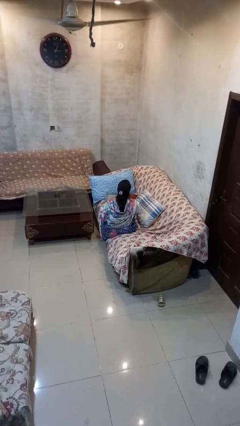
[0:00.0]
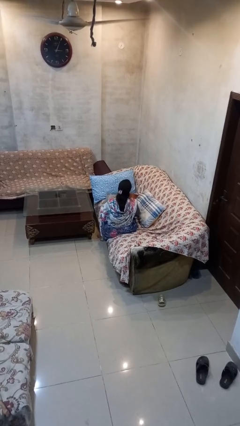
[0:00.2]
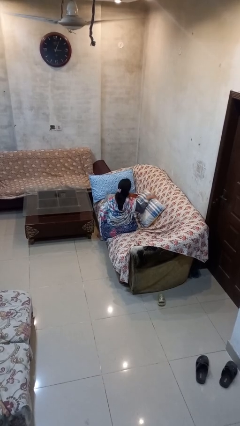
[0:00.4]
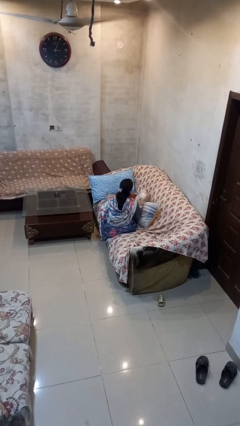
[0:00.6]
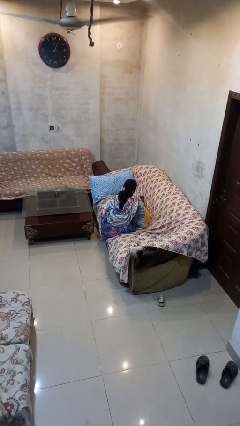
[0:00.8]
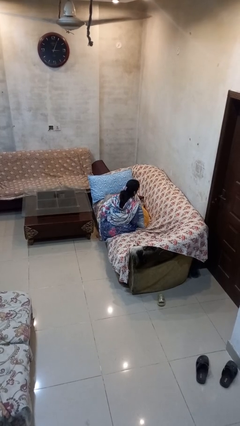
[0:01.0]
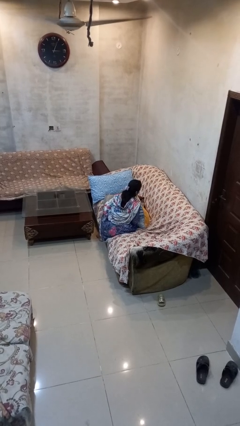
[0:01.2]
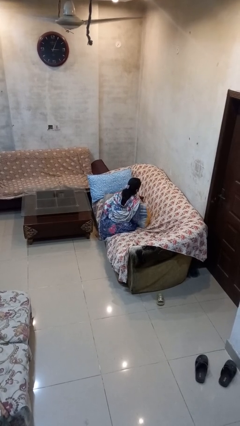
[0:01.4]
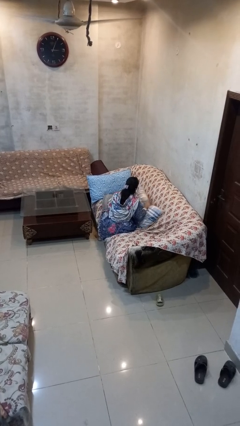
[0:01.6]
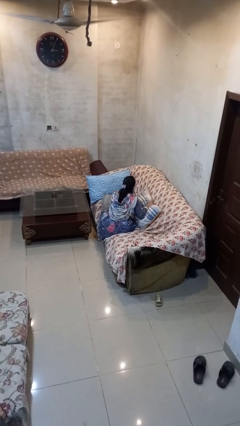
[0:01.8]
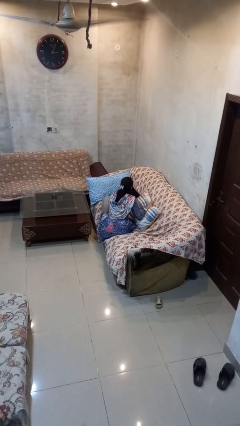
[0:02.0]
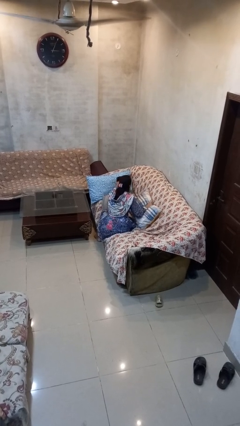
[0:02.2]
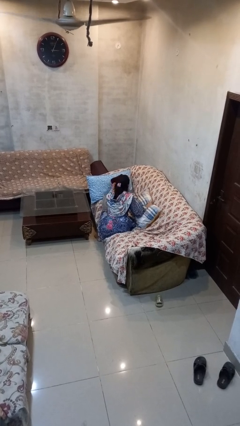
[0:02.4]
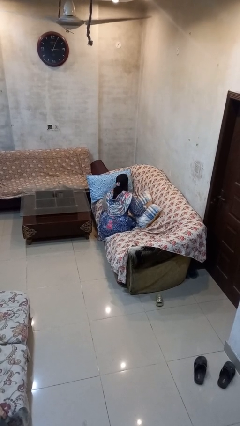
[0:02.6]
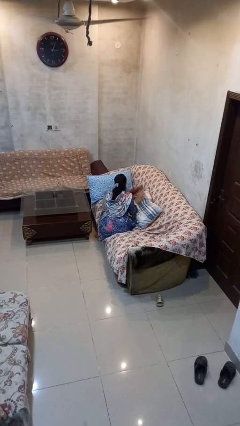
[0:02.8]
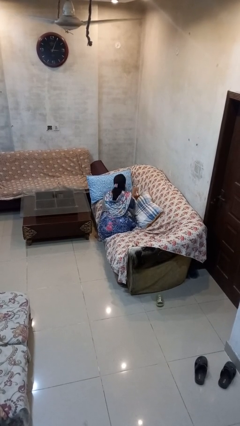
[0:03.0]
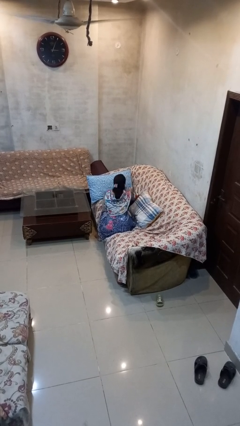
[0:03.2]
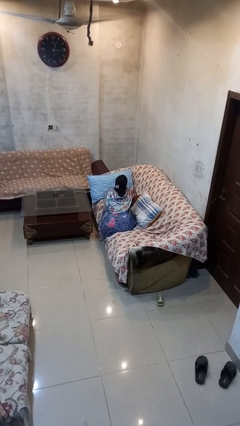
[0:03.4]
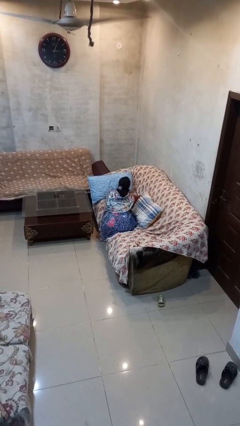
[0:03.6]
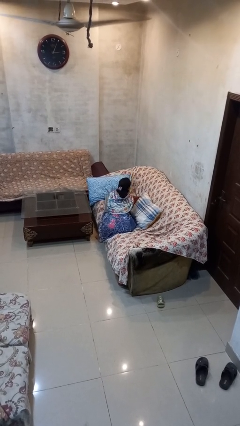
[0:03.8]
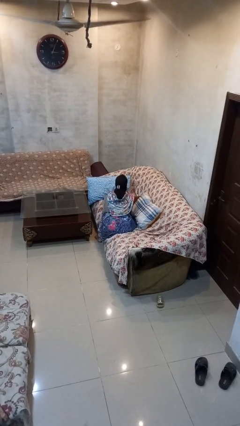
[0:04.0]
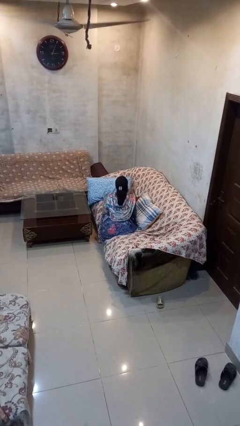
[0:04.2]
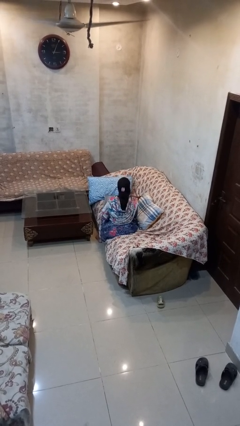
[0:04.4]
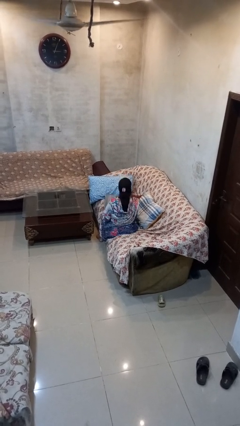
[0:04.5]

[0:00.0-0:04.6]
person searches in couch

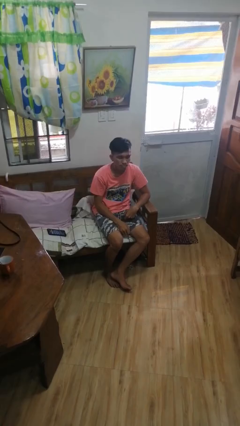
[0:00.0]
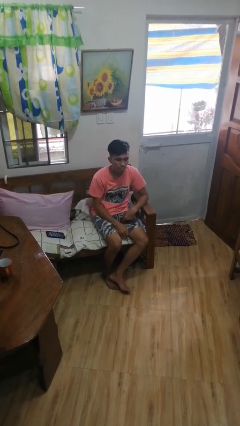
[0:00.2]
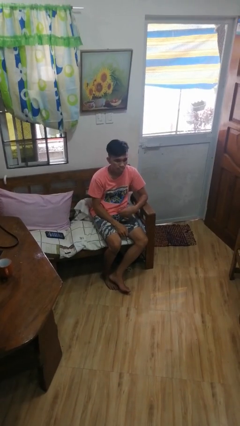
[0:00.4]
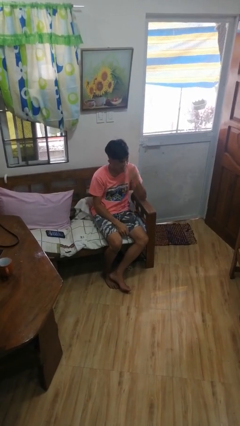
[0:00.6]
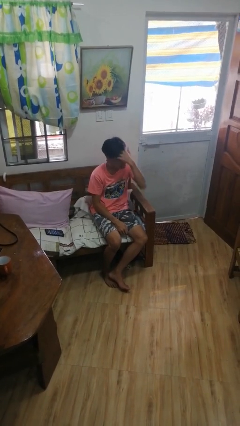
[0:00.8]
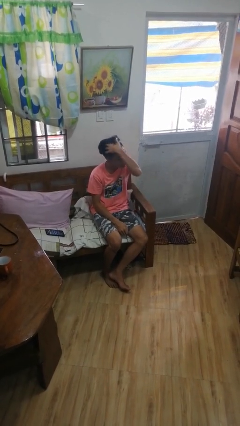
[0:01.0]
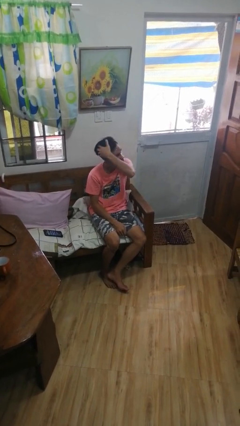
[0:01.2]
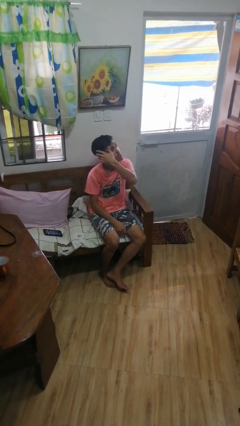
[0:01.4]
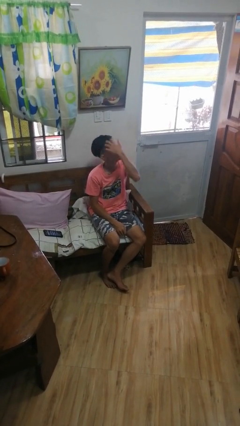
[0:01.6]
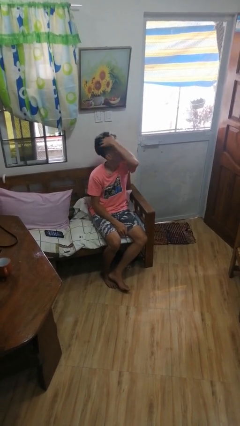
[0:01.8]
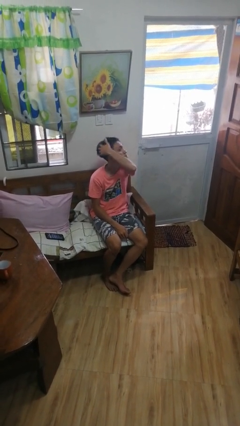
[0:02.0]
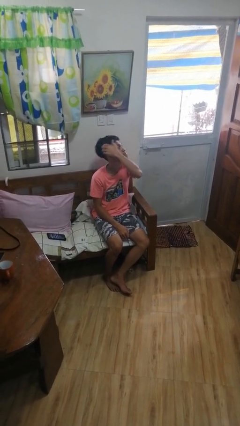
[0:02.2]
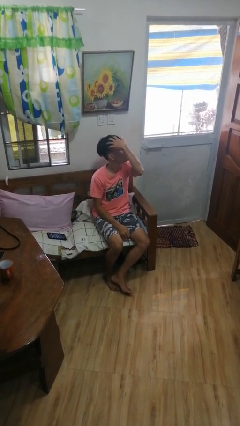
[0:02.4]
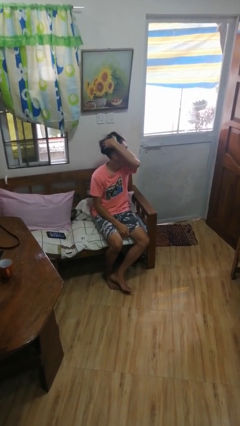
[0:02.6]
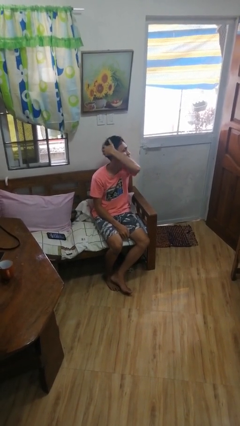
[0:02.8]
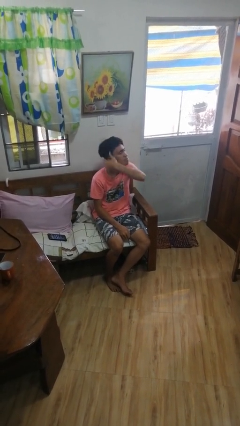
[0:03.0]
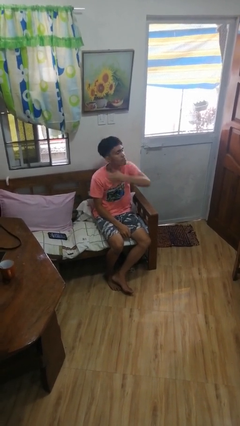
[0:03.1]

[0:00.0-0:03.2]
person strokes hair

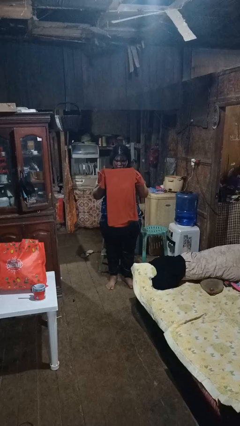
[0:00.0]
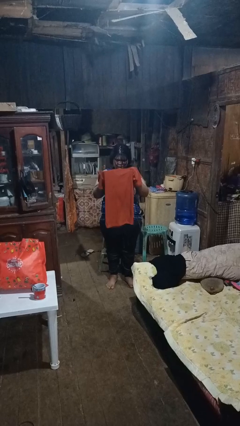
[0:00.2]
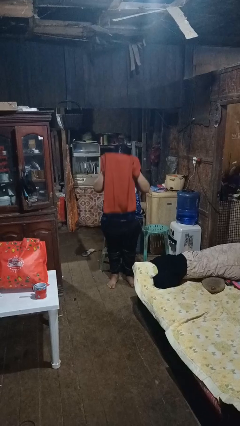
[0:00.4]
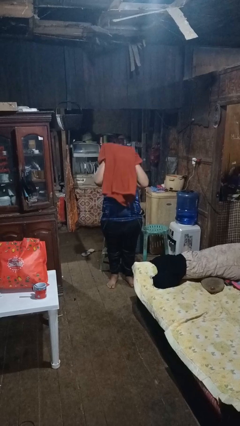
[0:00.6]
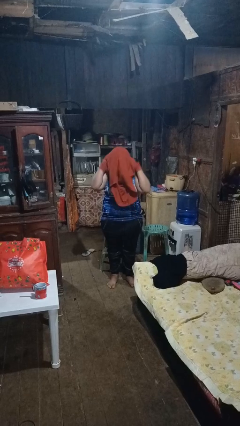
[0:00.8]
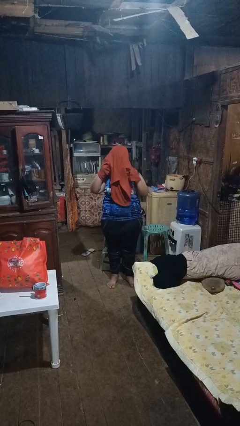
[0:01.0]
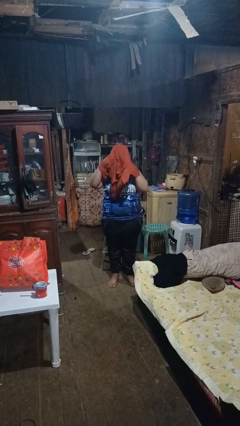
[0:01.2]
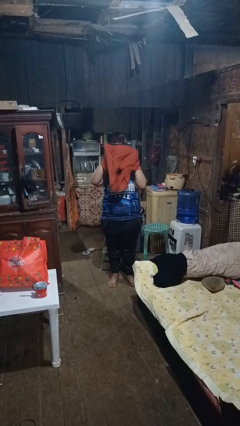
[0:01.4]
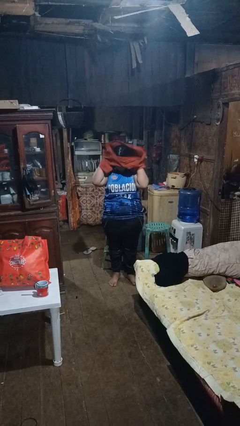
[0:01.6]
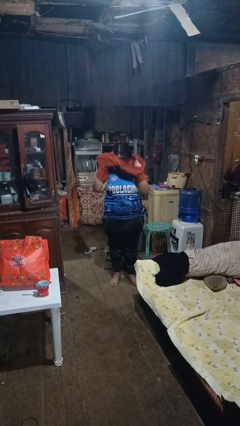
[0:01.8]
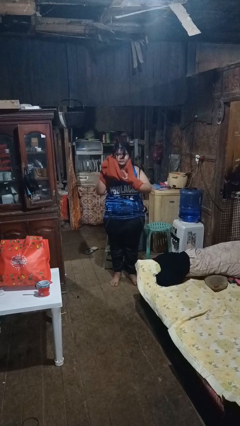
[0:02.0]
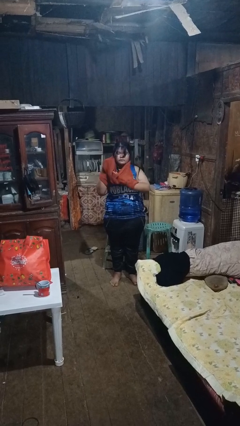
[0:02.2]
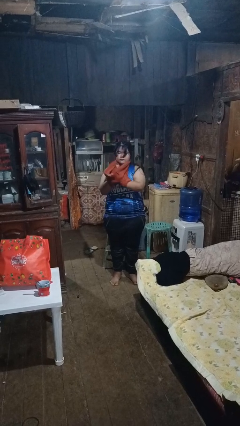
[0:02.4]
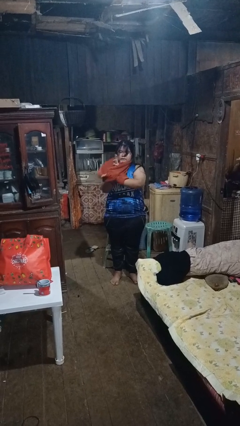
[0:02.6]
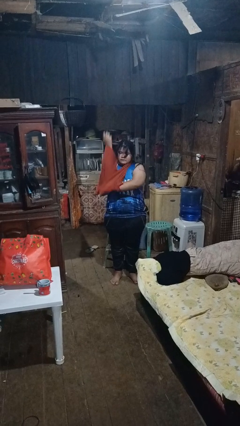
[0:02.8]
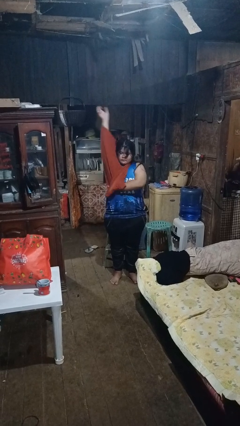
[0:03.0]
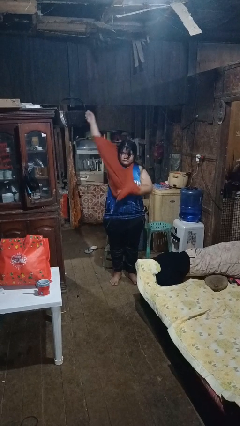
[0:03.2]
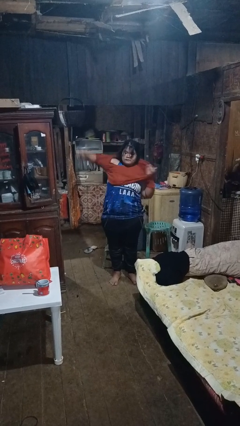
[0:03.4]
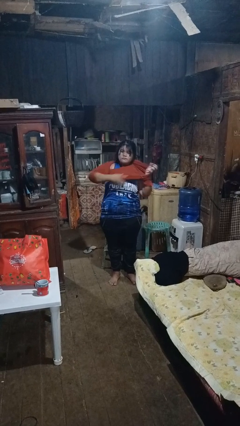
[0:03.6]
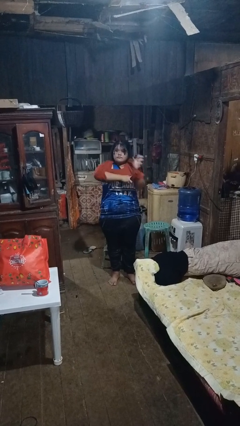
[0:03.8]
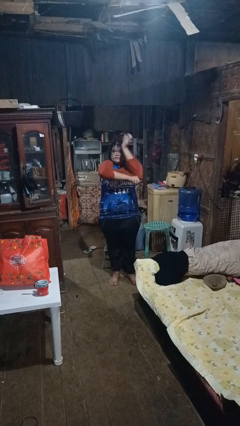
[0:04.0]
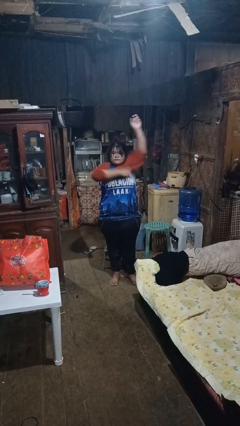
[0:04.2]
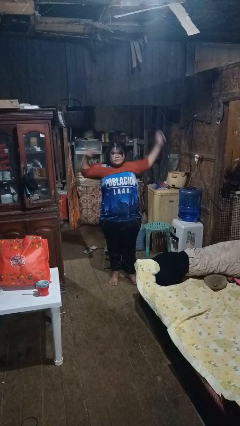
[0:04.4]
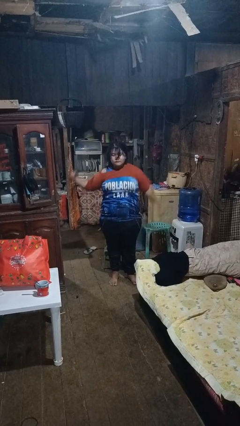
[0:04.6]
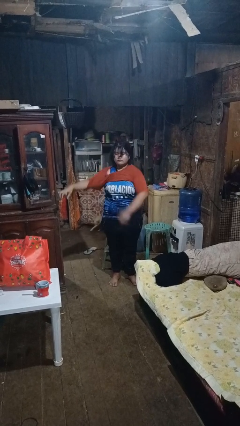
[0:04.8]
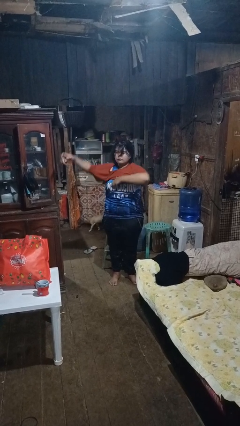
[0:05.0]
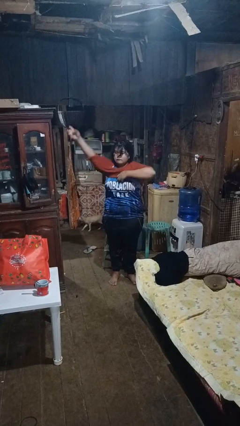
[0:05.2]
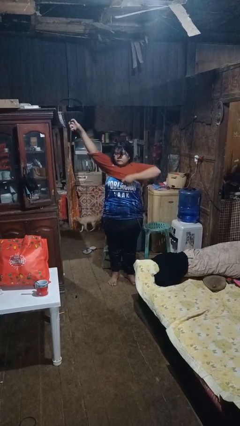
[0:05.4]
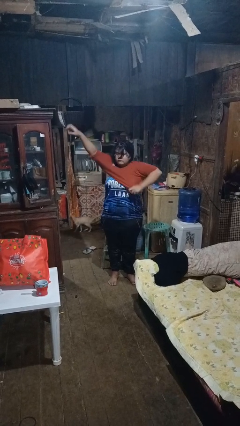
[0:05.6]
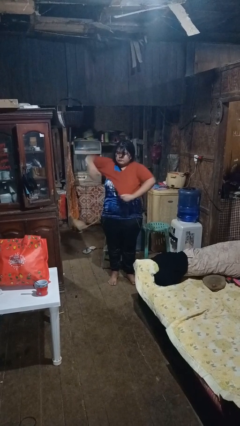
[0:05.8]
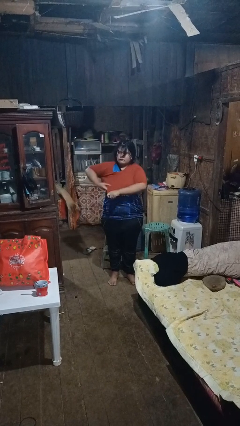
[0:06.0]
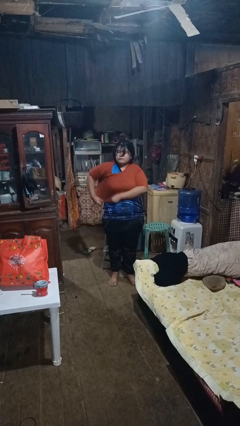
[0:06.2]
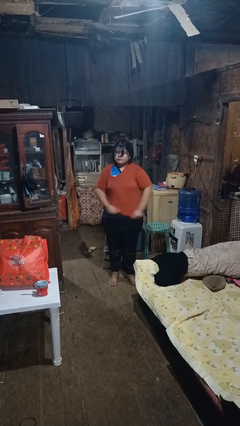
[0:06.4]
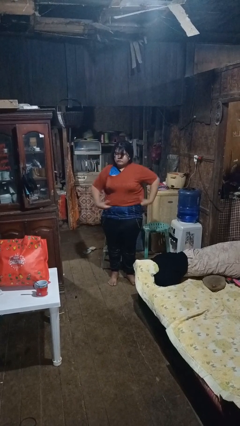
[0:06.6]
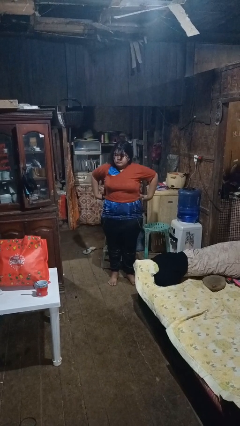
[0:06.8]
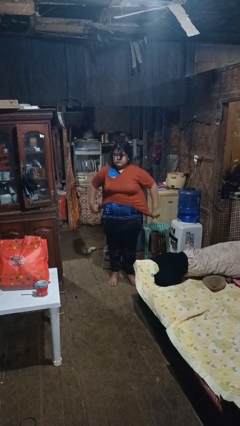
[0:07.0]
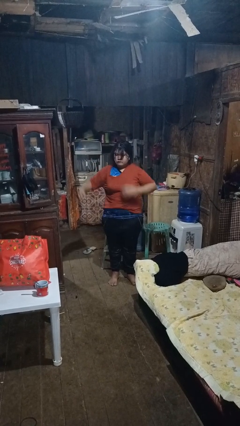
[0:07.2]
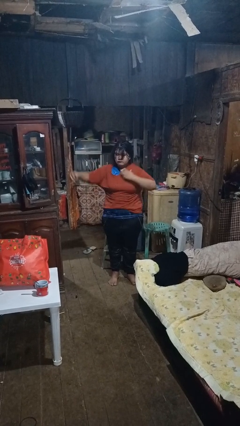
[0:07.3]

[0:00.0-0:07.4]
person puts on shirt

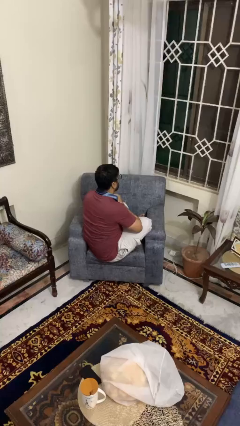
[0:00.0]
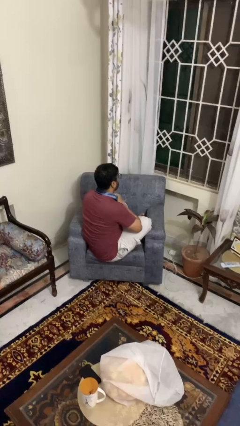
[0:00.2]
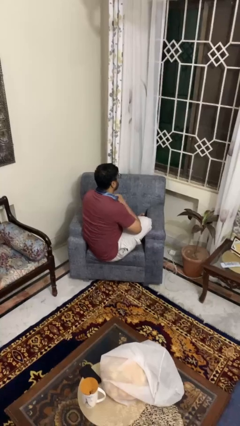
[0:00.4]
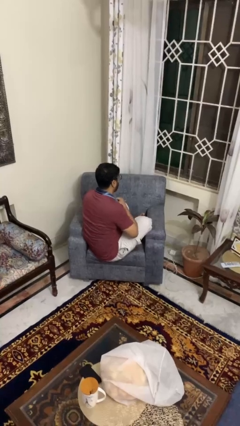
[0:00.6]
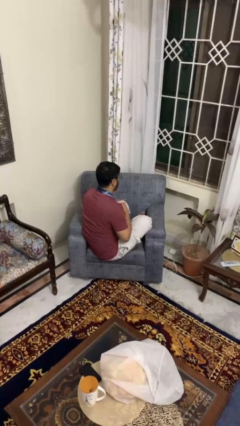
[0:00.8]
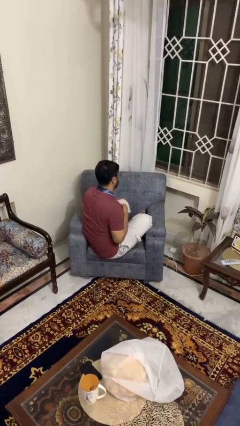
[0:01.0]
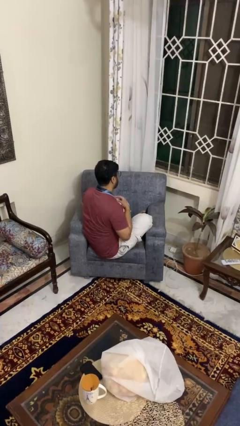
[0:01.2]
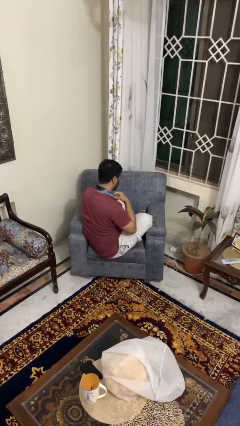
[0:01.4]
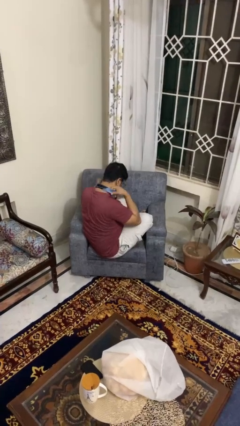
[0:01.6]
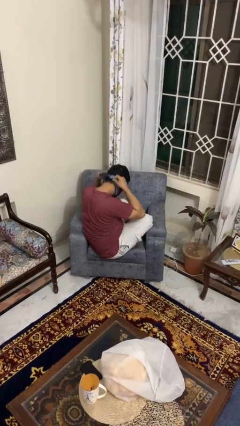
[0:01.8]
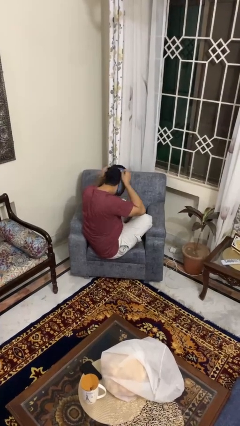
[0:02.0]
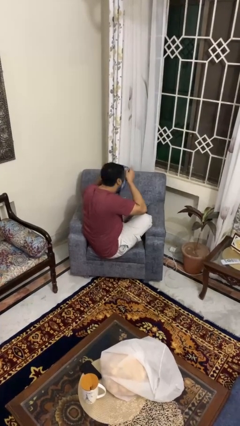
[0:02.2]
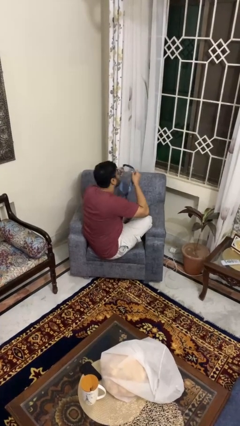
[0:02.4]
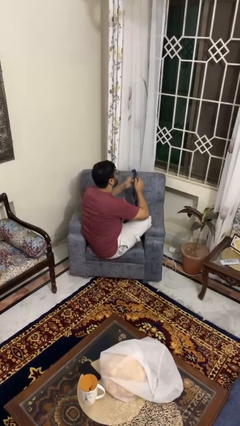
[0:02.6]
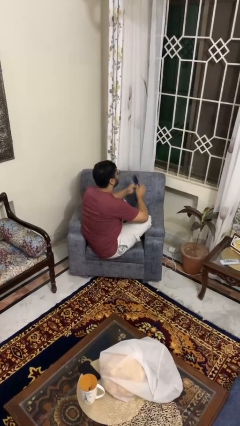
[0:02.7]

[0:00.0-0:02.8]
person takes off necktie
